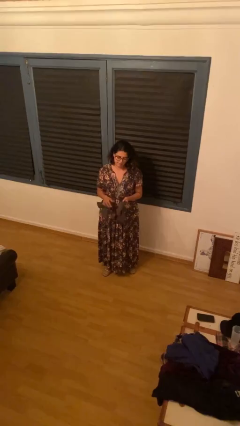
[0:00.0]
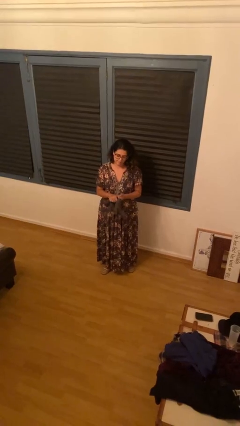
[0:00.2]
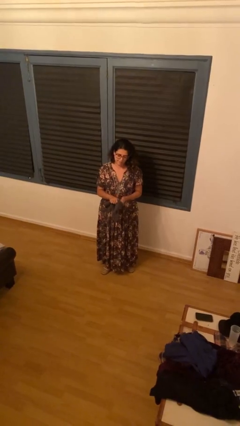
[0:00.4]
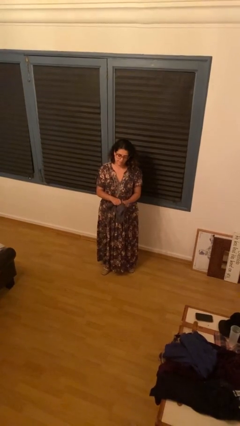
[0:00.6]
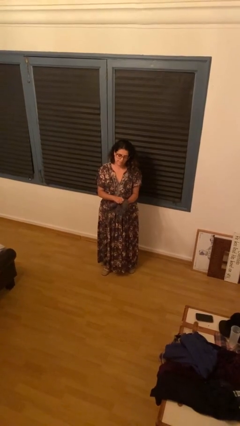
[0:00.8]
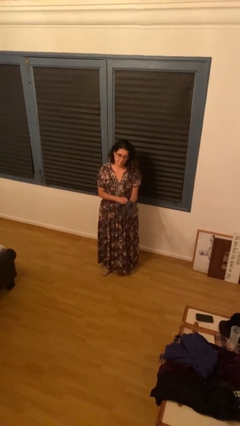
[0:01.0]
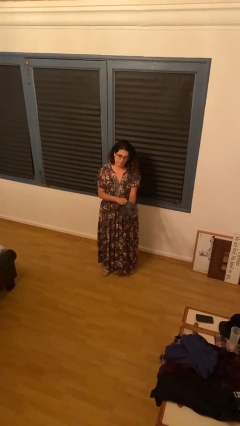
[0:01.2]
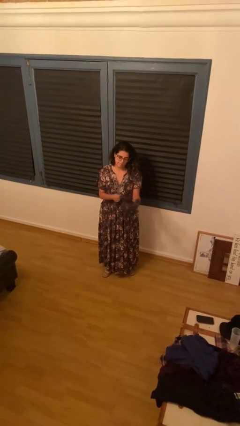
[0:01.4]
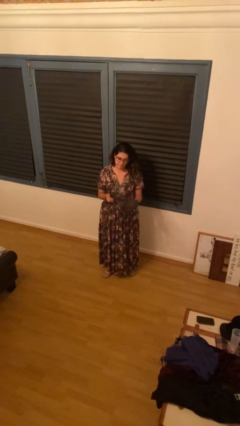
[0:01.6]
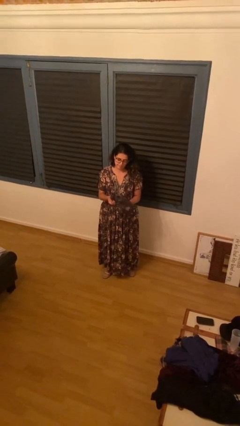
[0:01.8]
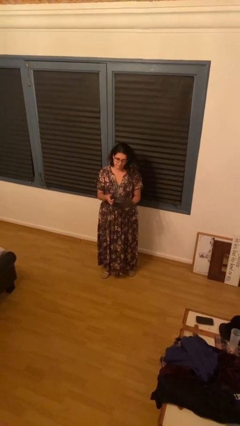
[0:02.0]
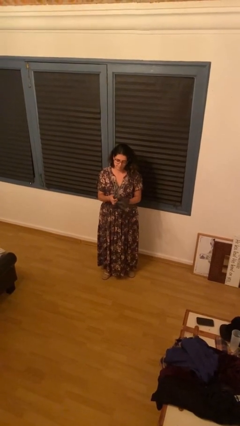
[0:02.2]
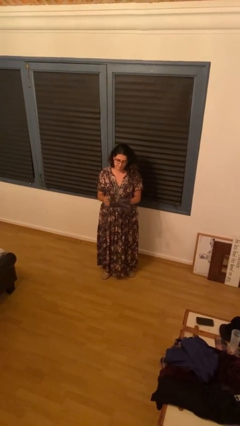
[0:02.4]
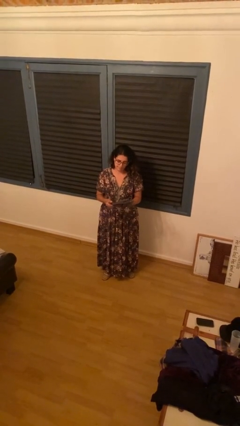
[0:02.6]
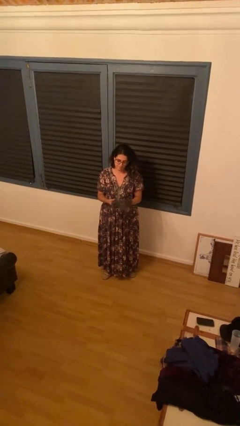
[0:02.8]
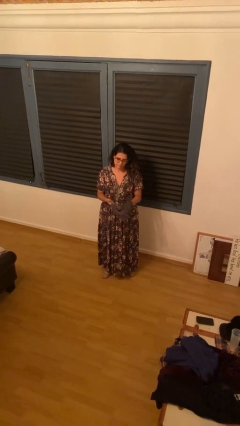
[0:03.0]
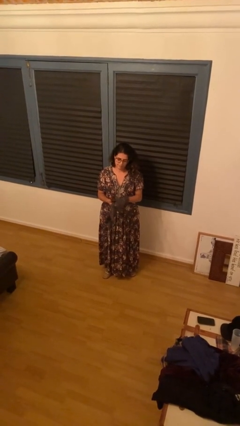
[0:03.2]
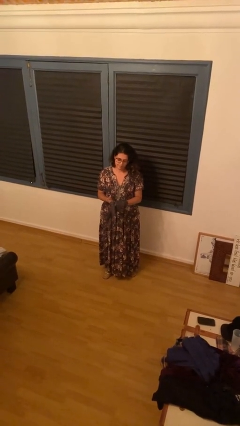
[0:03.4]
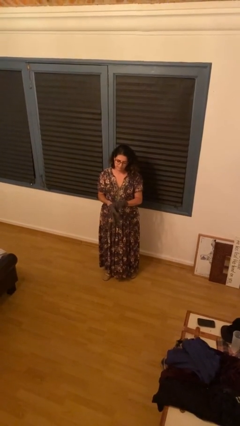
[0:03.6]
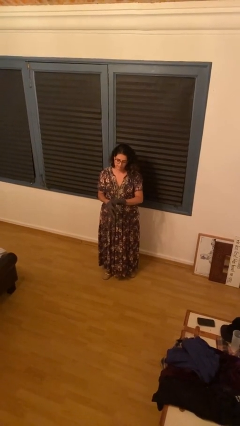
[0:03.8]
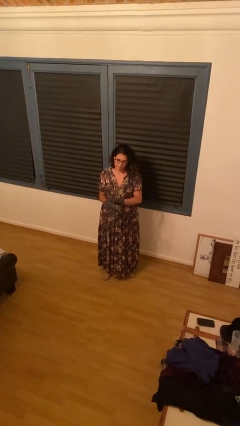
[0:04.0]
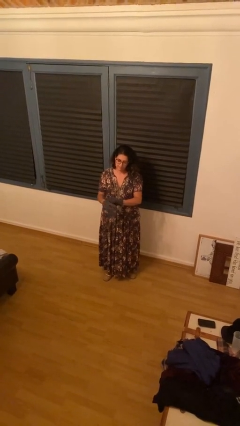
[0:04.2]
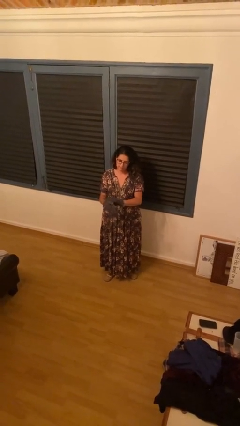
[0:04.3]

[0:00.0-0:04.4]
person puts on gloves

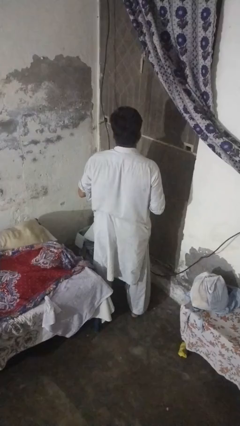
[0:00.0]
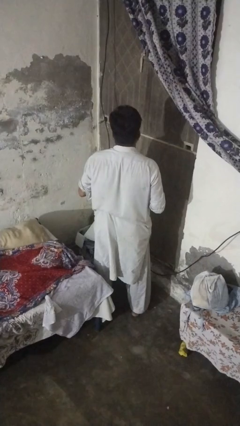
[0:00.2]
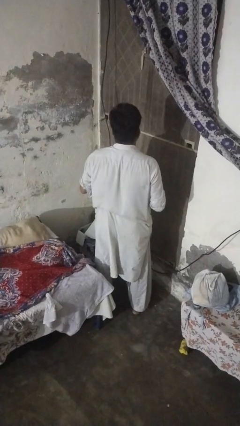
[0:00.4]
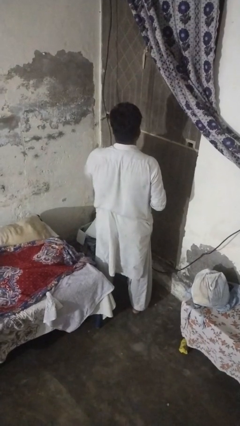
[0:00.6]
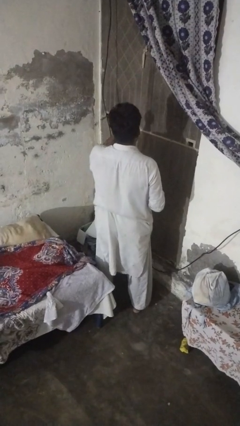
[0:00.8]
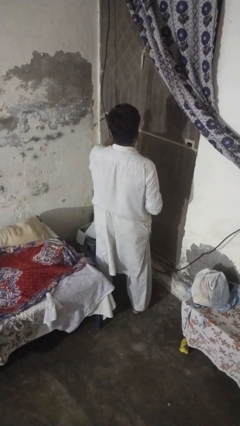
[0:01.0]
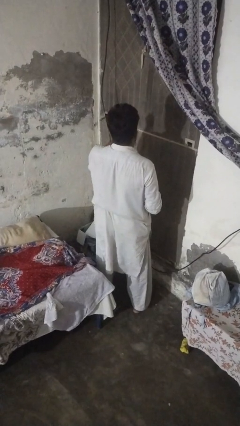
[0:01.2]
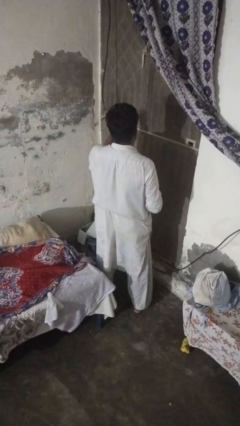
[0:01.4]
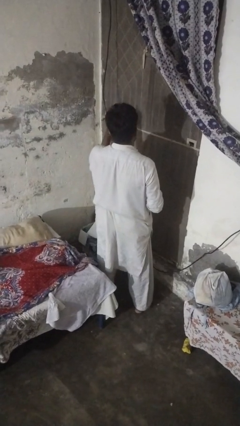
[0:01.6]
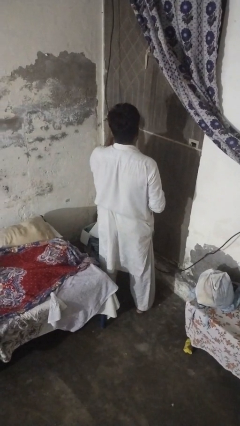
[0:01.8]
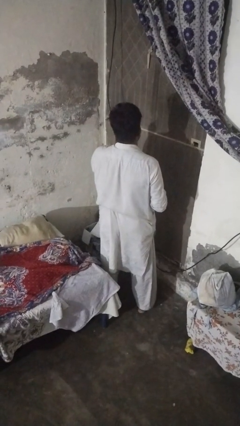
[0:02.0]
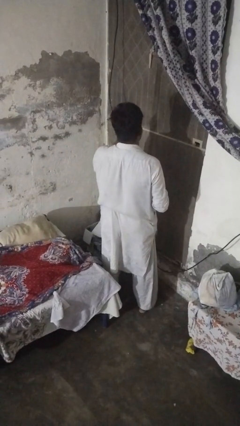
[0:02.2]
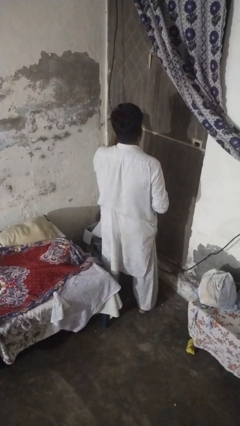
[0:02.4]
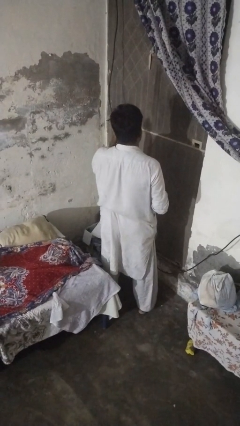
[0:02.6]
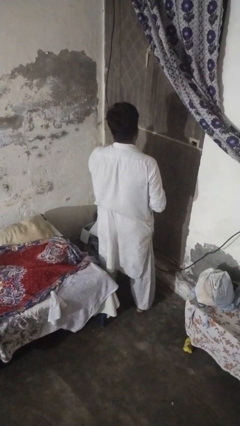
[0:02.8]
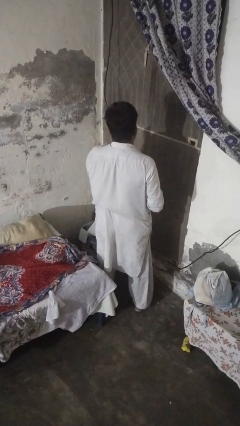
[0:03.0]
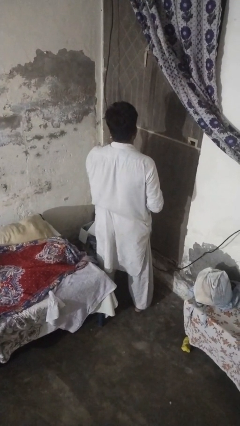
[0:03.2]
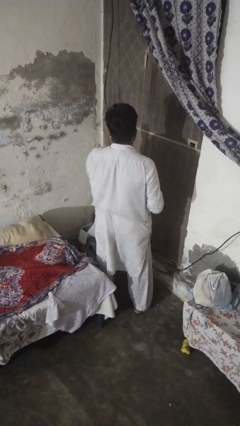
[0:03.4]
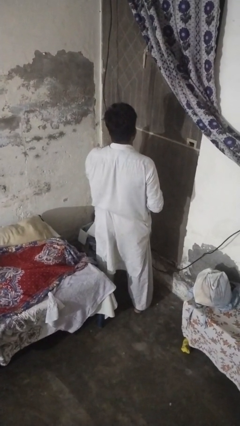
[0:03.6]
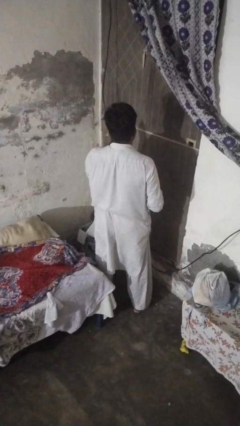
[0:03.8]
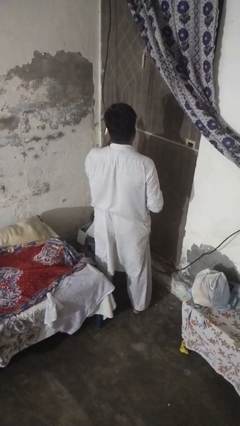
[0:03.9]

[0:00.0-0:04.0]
person sprays from bottle

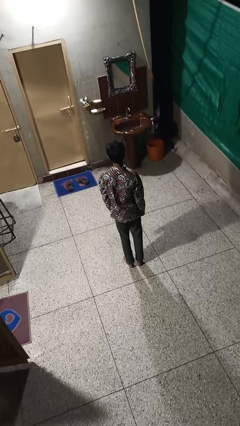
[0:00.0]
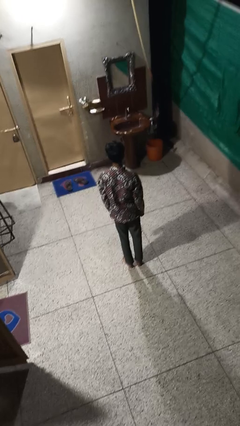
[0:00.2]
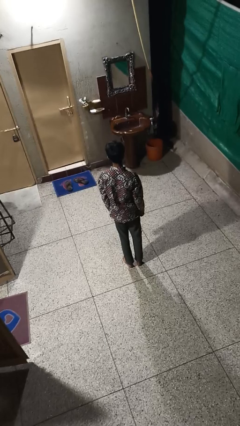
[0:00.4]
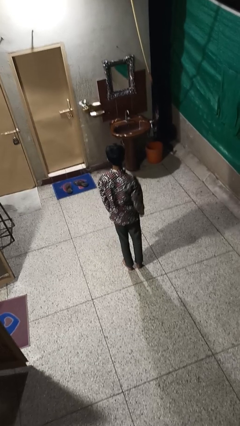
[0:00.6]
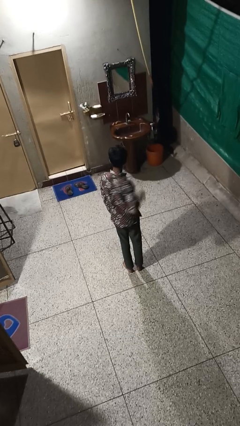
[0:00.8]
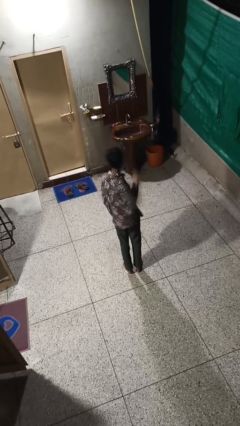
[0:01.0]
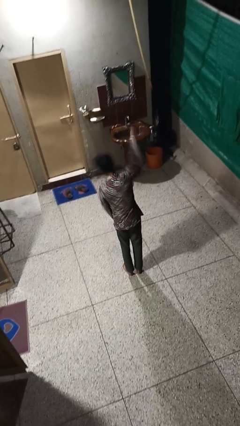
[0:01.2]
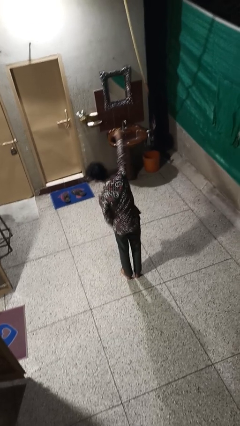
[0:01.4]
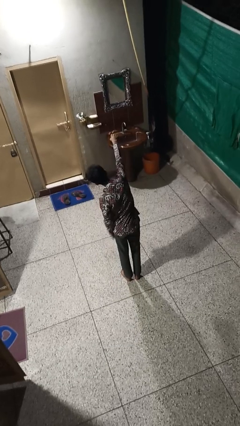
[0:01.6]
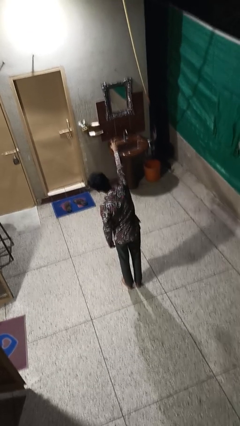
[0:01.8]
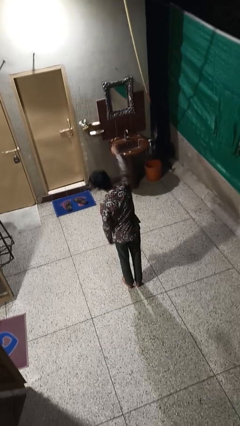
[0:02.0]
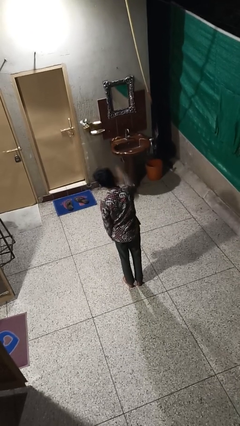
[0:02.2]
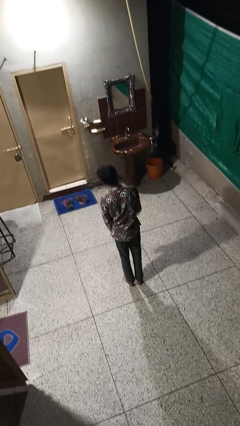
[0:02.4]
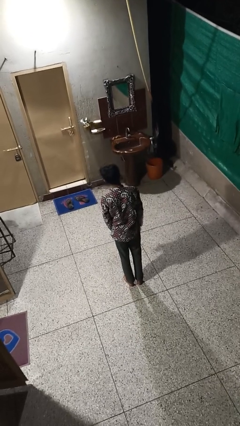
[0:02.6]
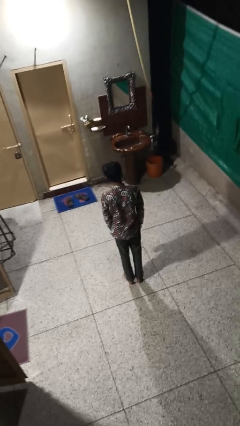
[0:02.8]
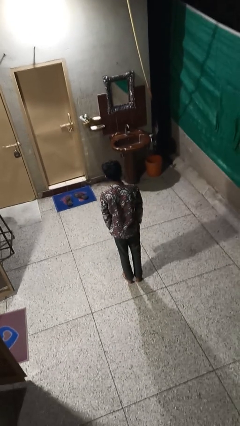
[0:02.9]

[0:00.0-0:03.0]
person punches

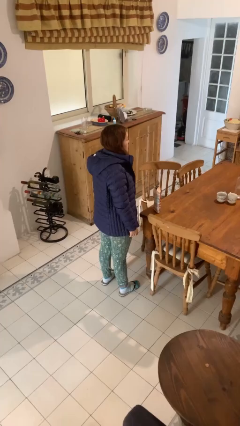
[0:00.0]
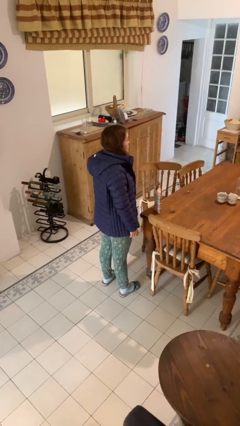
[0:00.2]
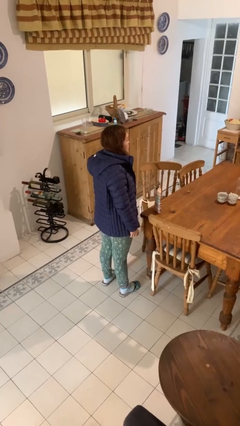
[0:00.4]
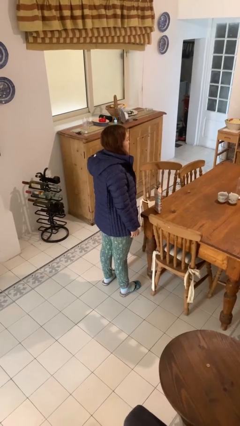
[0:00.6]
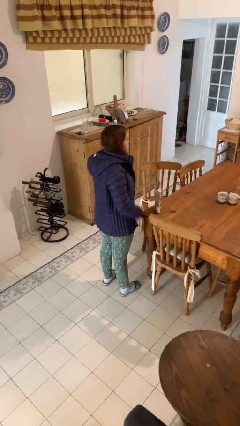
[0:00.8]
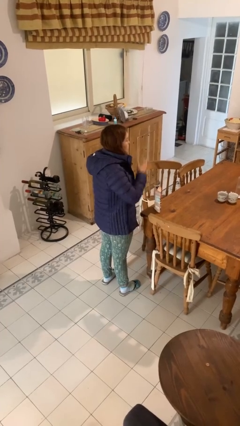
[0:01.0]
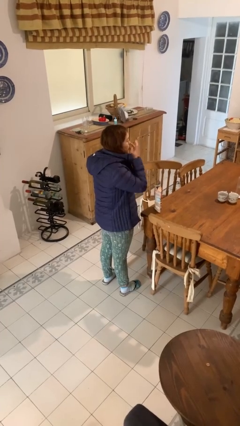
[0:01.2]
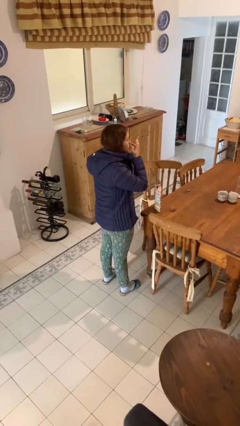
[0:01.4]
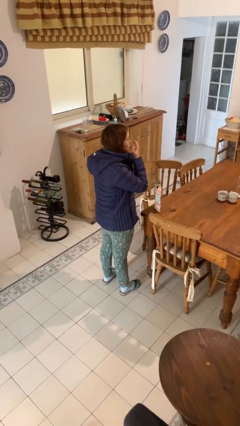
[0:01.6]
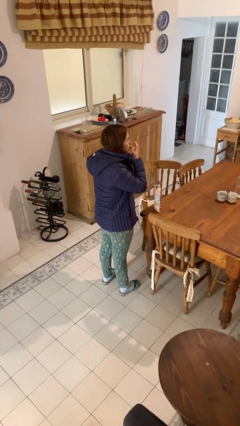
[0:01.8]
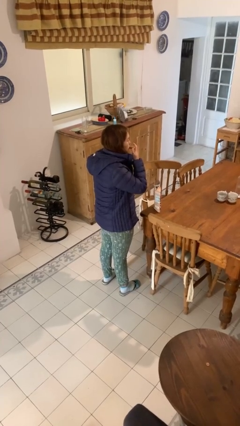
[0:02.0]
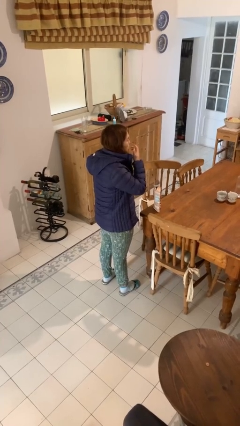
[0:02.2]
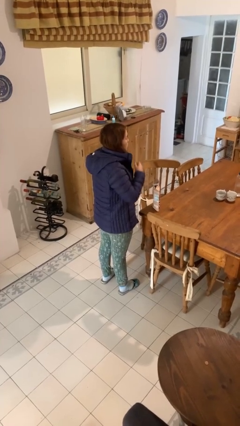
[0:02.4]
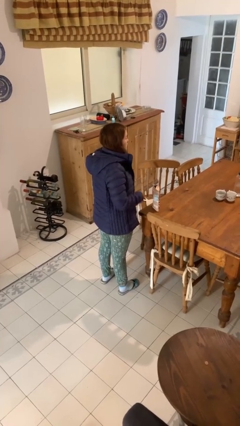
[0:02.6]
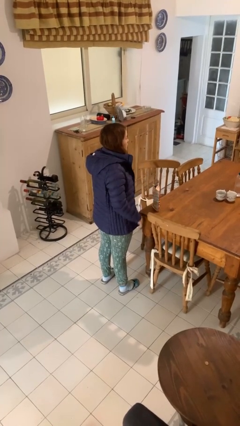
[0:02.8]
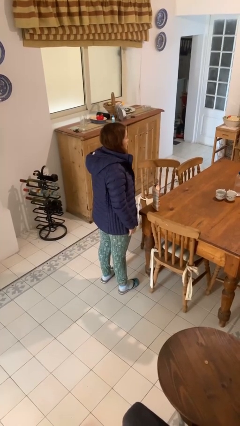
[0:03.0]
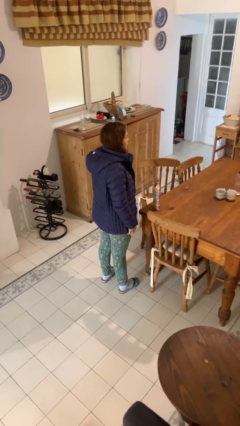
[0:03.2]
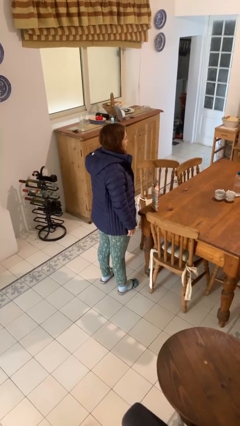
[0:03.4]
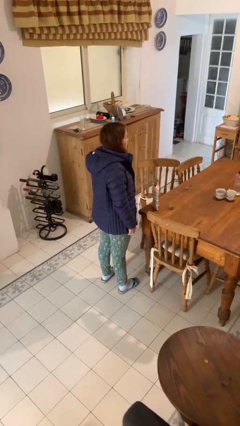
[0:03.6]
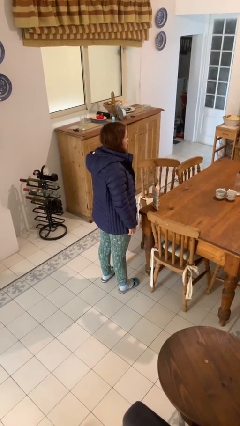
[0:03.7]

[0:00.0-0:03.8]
person licks fingers

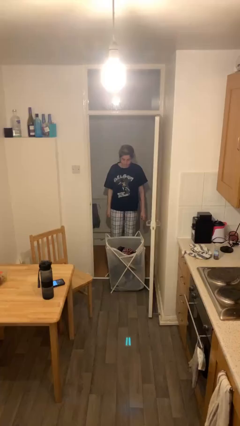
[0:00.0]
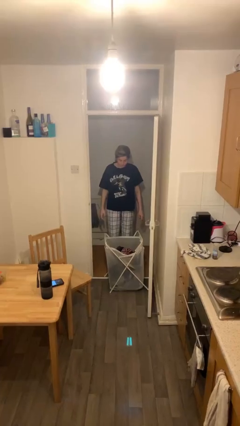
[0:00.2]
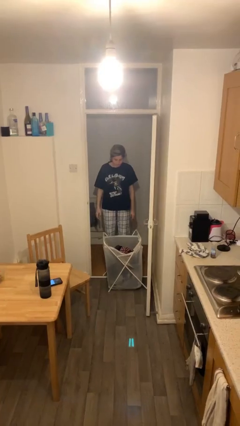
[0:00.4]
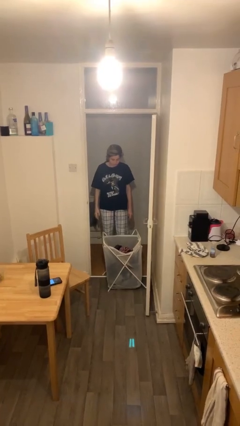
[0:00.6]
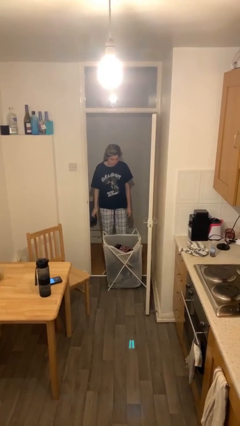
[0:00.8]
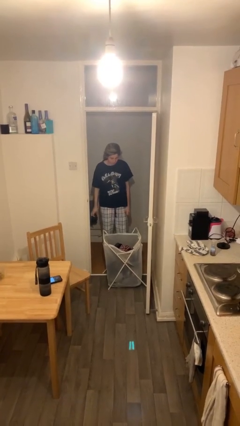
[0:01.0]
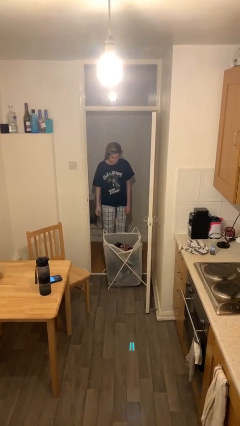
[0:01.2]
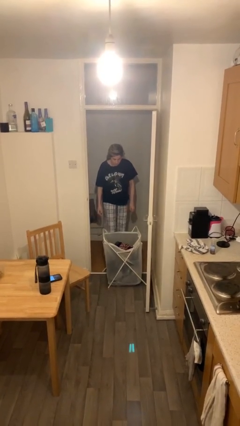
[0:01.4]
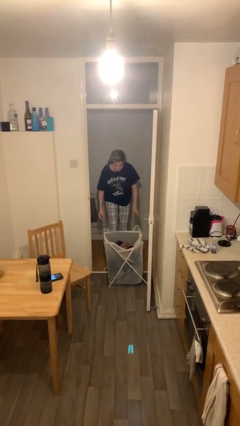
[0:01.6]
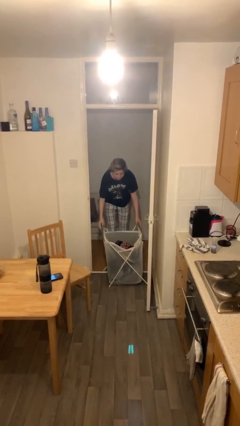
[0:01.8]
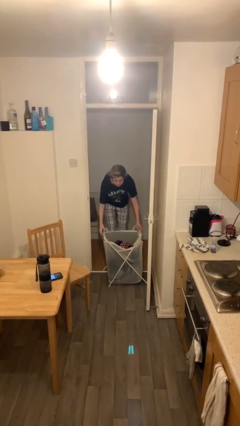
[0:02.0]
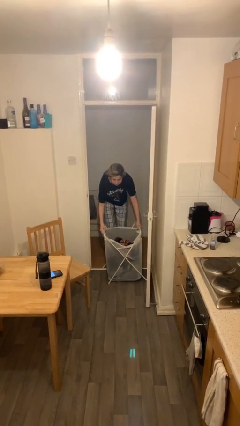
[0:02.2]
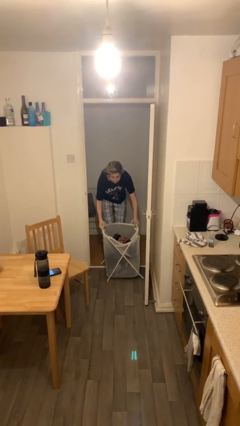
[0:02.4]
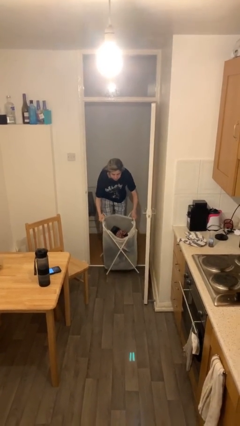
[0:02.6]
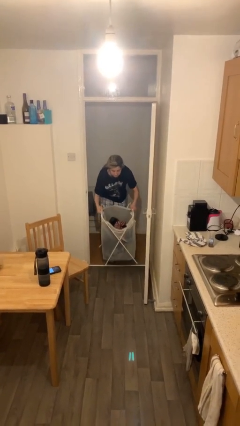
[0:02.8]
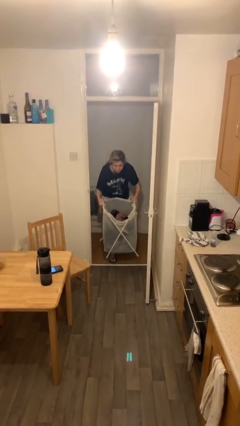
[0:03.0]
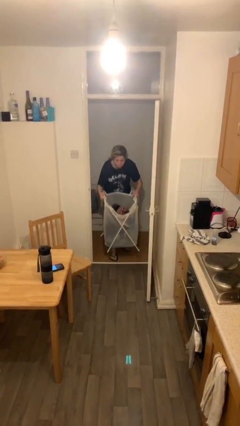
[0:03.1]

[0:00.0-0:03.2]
person picks up object from floor
